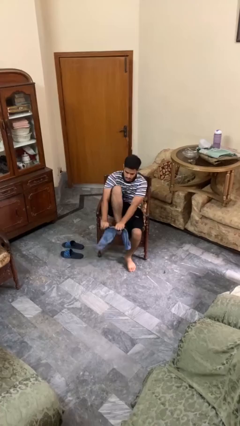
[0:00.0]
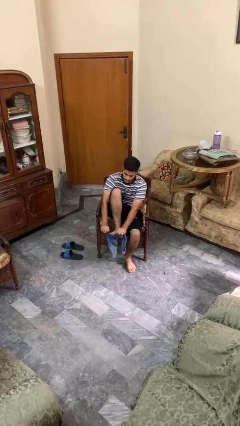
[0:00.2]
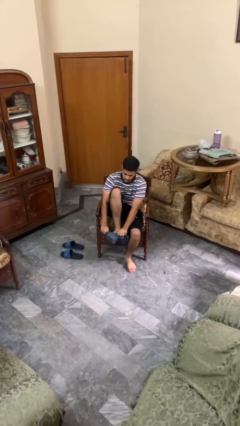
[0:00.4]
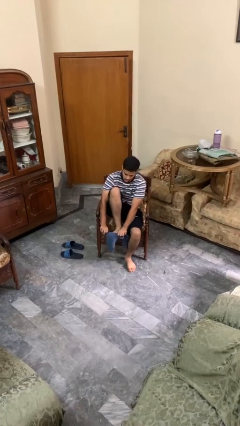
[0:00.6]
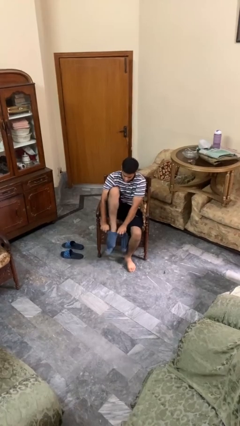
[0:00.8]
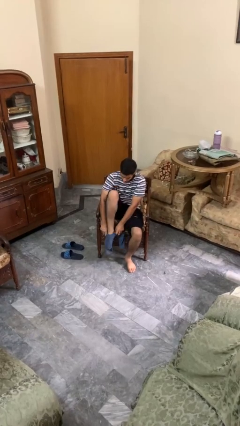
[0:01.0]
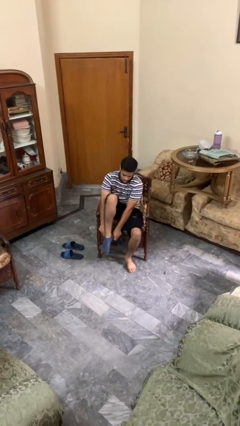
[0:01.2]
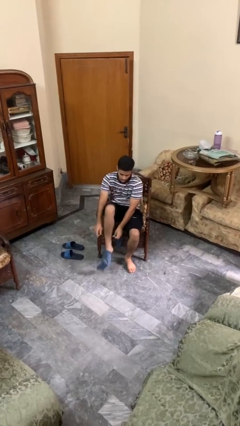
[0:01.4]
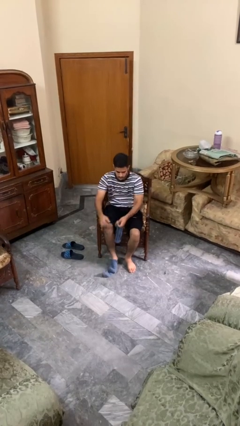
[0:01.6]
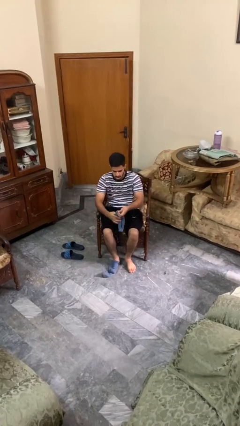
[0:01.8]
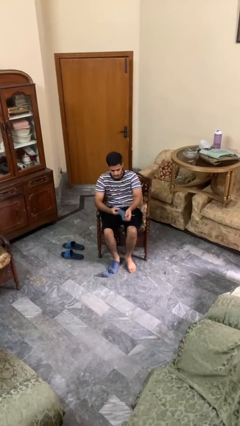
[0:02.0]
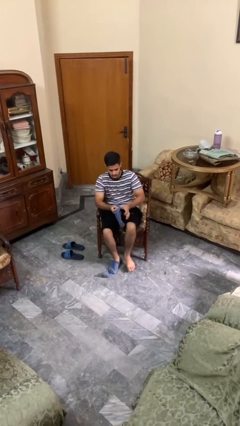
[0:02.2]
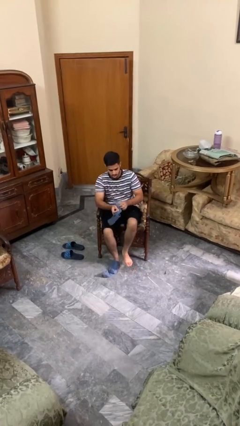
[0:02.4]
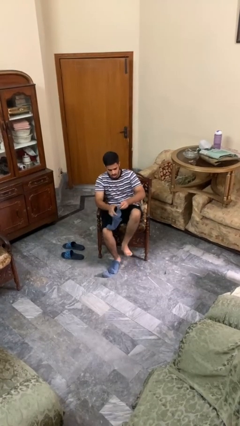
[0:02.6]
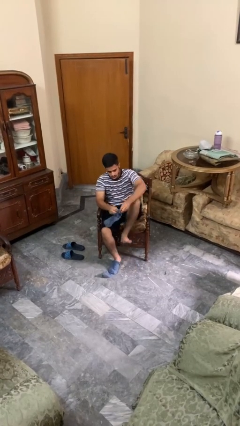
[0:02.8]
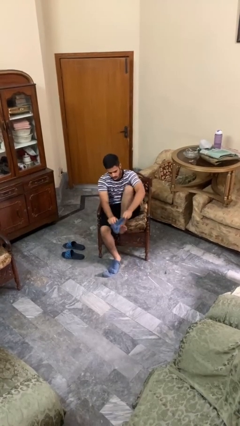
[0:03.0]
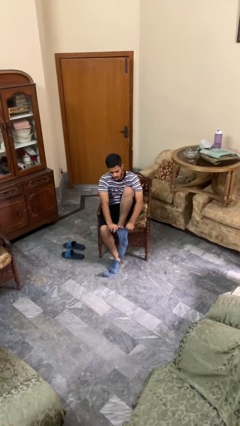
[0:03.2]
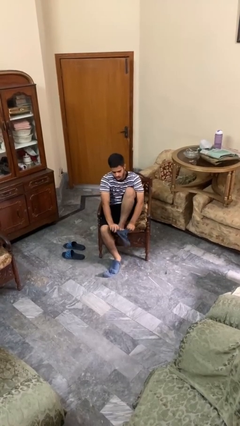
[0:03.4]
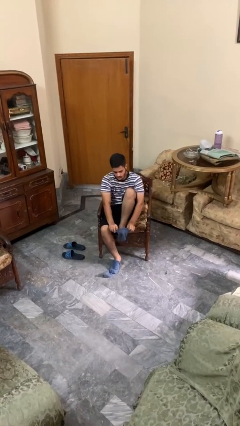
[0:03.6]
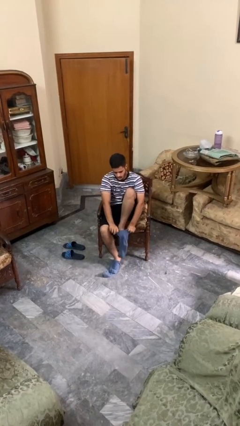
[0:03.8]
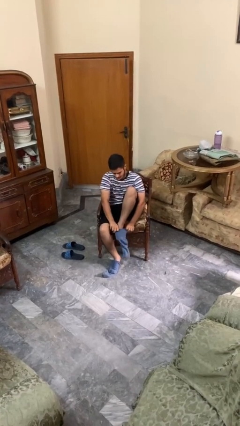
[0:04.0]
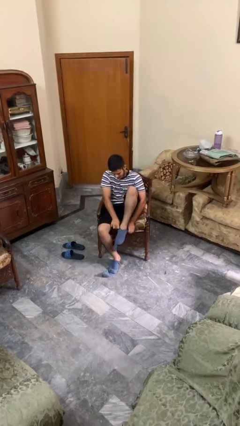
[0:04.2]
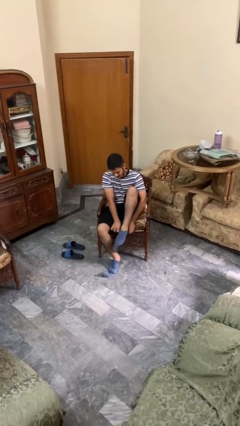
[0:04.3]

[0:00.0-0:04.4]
person puts on socks

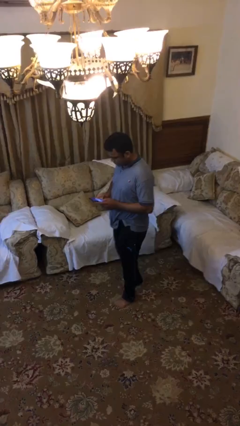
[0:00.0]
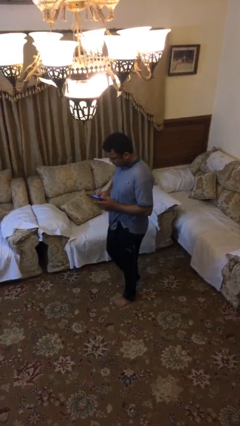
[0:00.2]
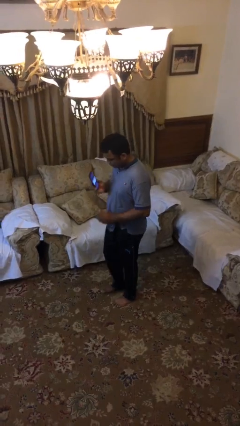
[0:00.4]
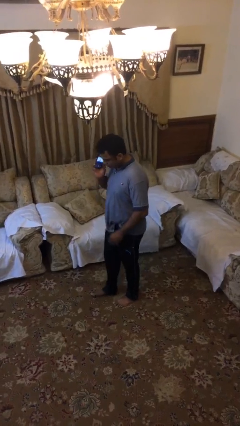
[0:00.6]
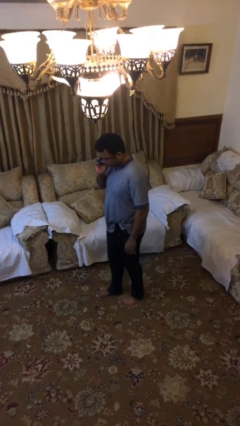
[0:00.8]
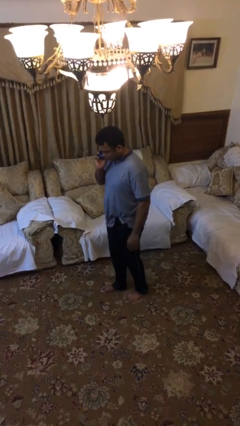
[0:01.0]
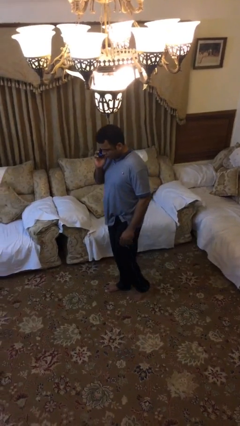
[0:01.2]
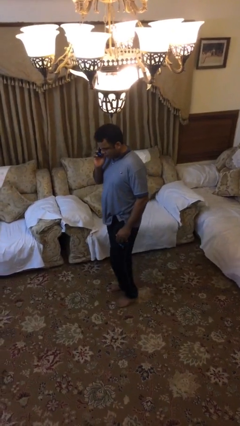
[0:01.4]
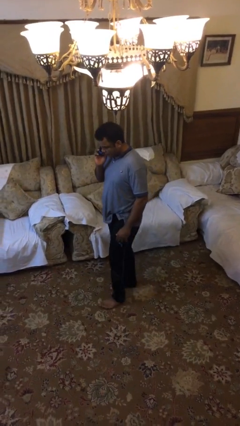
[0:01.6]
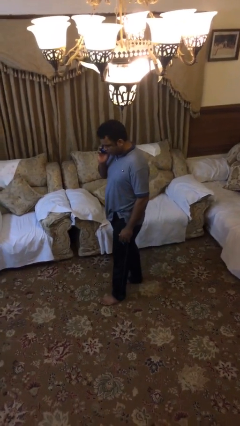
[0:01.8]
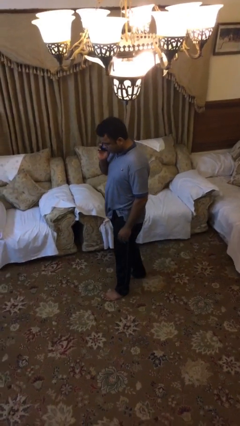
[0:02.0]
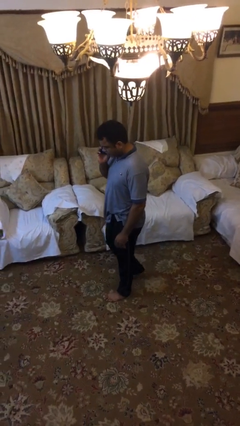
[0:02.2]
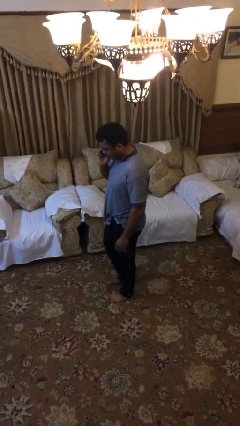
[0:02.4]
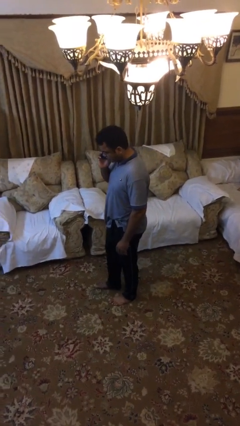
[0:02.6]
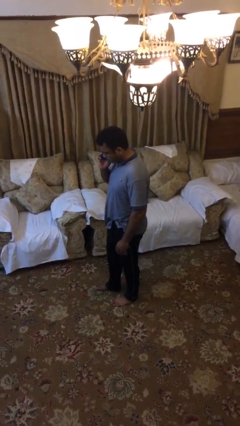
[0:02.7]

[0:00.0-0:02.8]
person talks on phone

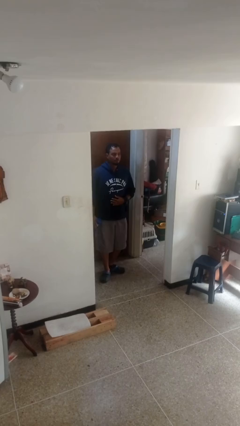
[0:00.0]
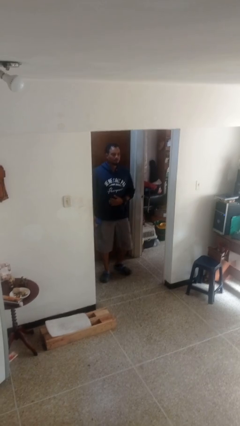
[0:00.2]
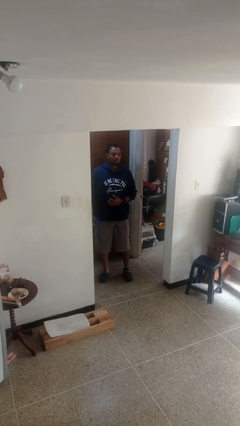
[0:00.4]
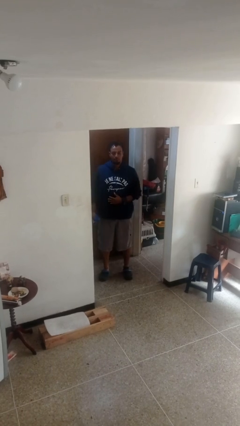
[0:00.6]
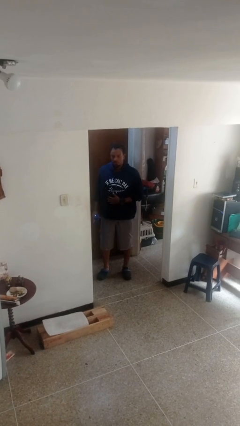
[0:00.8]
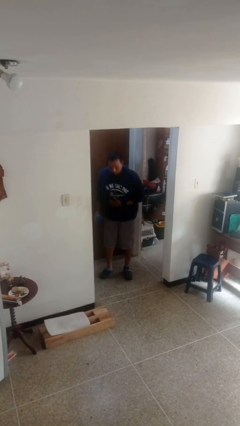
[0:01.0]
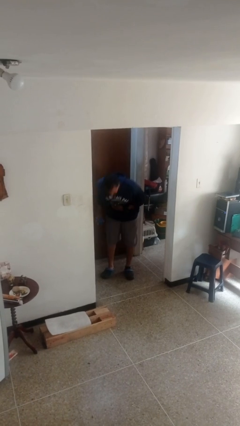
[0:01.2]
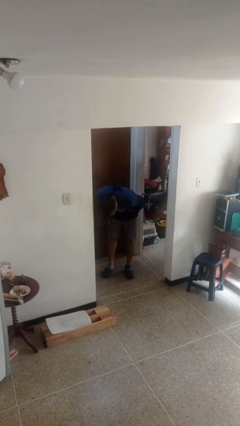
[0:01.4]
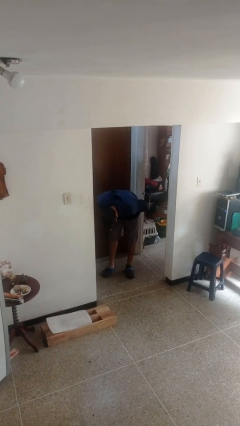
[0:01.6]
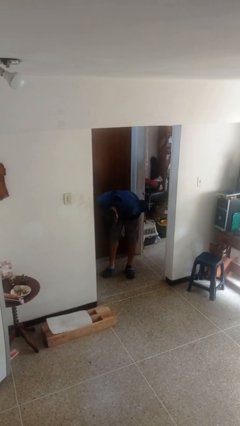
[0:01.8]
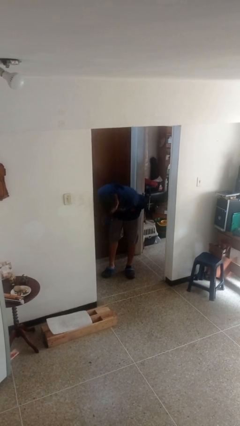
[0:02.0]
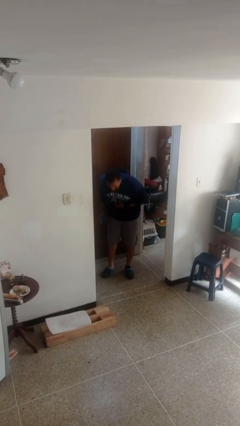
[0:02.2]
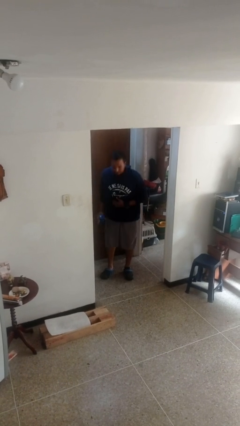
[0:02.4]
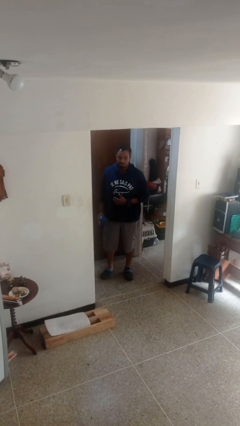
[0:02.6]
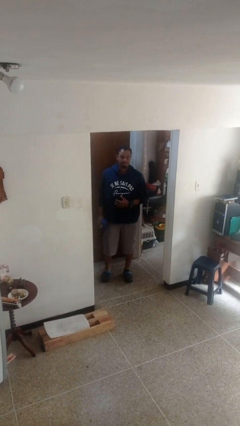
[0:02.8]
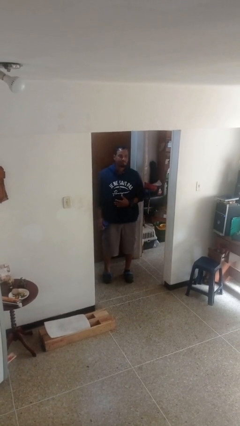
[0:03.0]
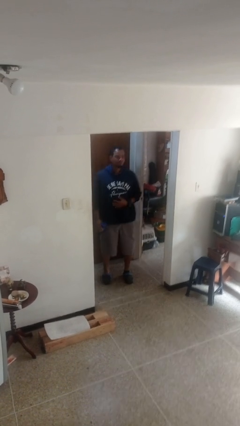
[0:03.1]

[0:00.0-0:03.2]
person bows

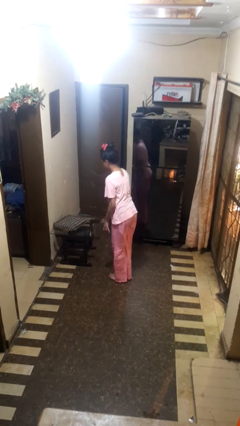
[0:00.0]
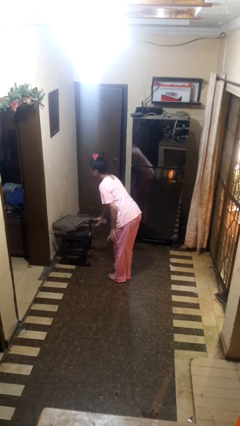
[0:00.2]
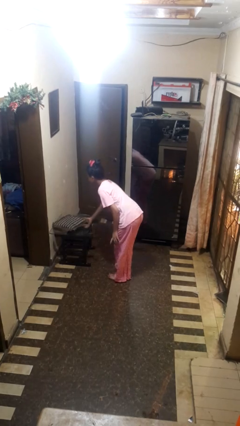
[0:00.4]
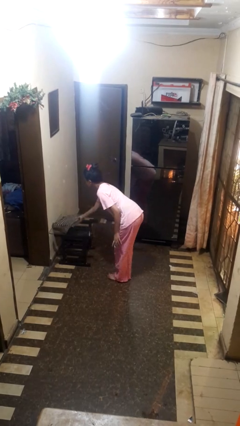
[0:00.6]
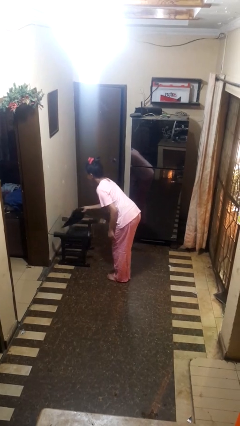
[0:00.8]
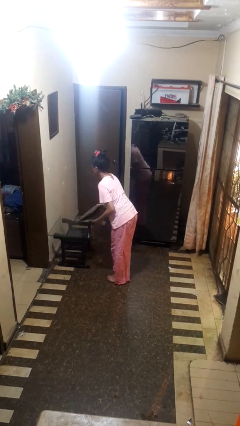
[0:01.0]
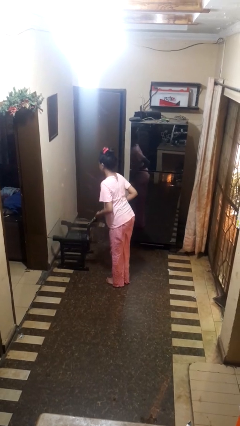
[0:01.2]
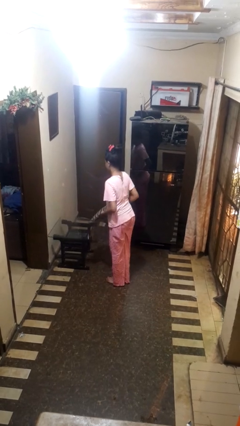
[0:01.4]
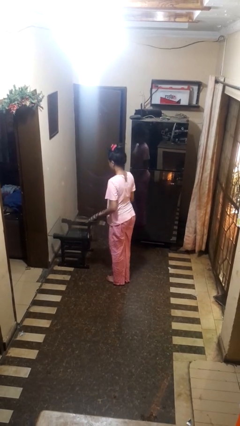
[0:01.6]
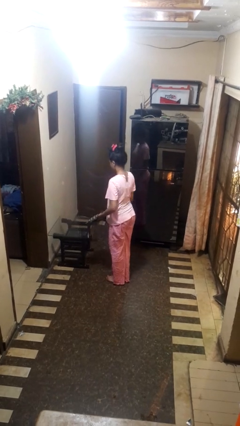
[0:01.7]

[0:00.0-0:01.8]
person picks up object from table

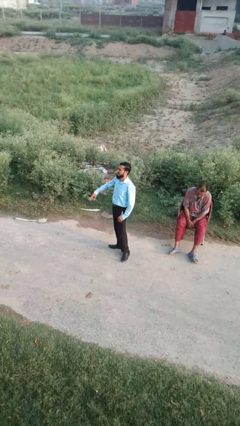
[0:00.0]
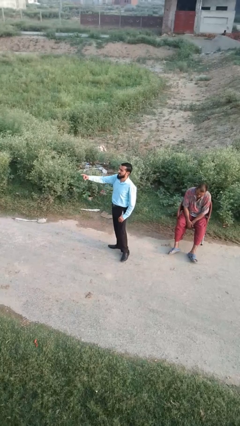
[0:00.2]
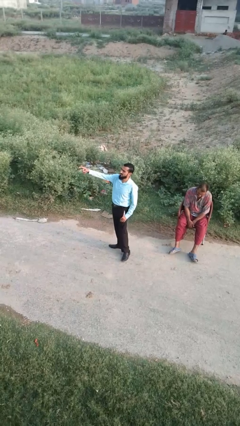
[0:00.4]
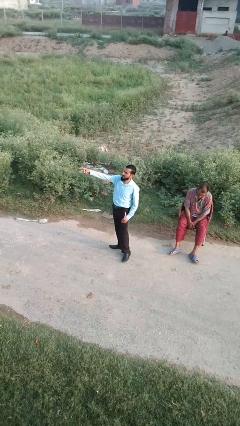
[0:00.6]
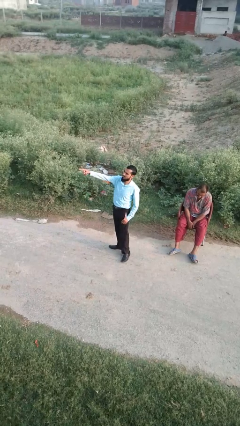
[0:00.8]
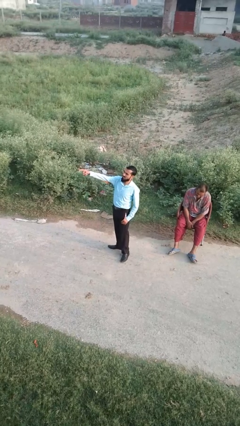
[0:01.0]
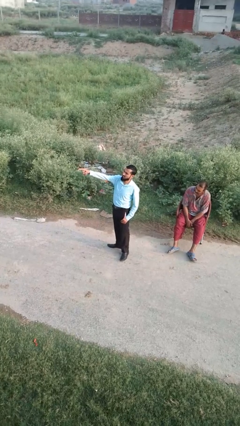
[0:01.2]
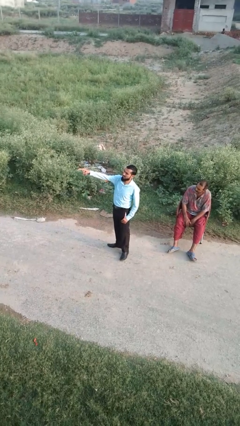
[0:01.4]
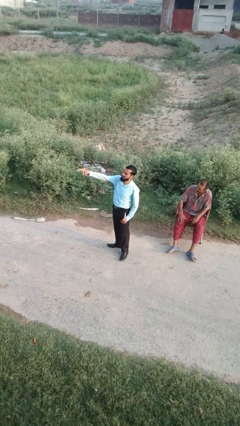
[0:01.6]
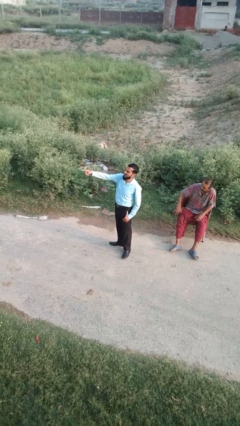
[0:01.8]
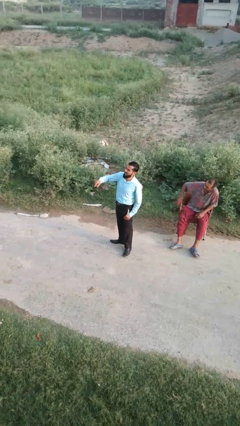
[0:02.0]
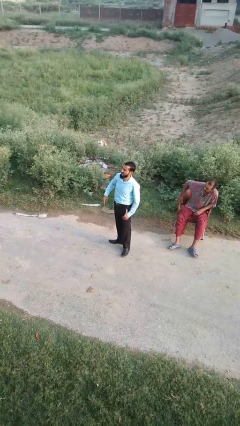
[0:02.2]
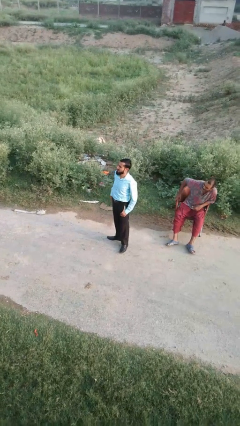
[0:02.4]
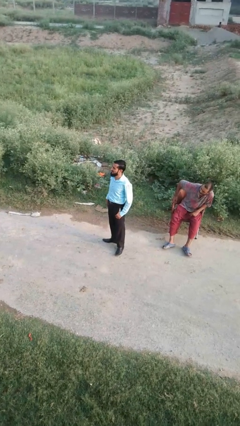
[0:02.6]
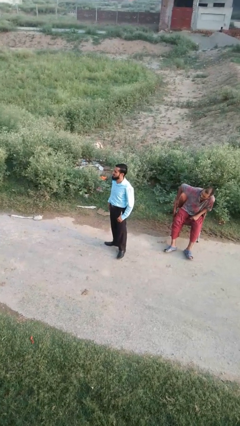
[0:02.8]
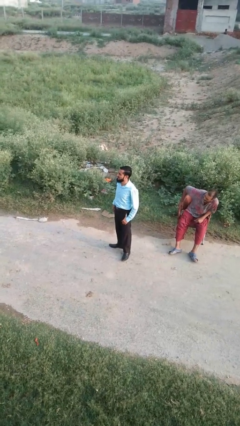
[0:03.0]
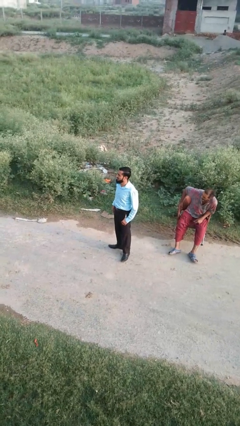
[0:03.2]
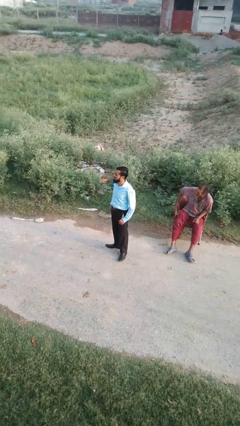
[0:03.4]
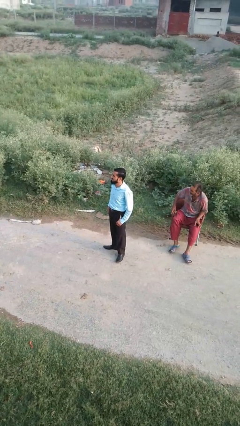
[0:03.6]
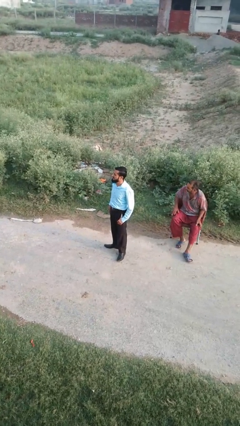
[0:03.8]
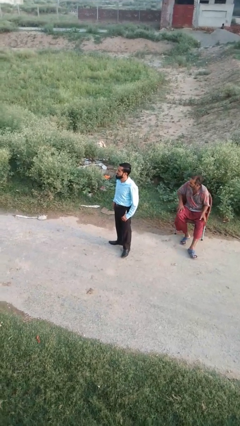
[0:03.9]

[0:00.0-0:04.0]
person points at person

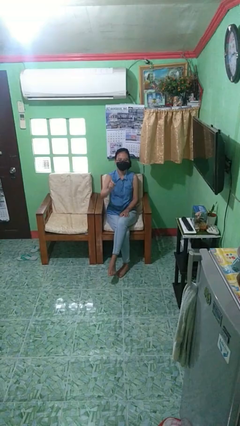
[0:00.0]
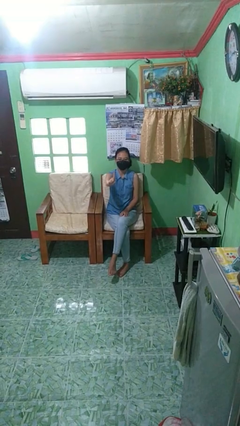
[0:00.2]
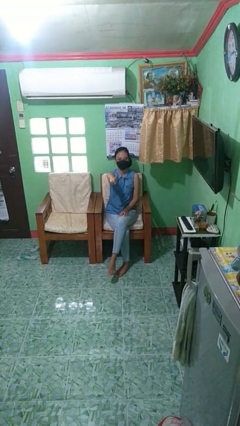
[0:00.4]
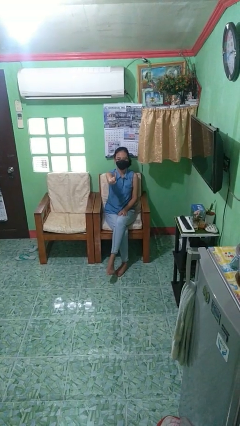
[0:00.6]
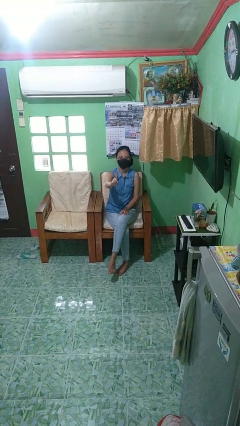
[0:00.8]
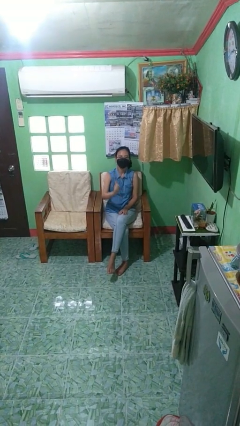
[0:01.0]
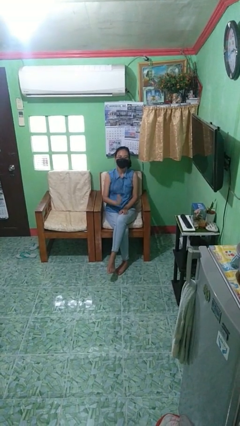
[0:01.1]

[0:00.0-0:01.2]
person gestures number one

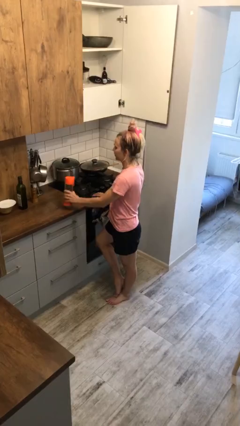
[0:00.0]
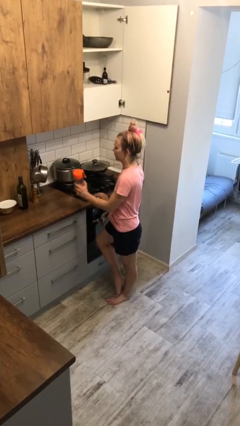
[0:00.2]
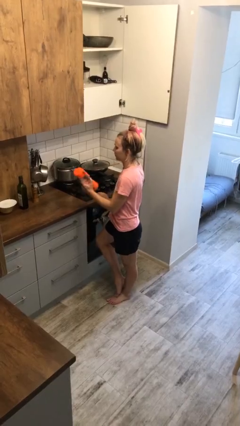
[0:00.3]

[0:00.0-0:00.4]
person picks up object from countertop
